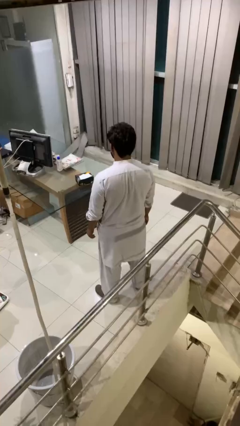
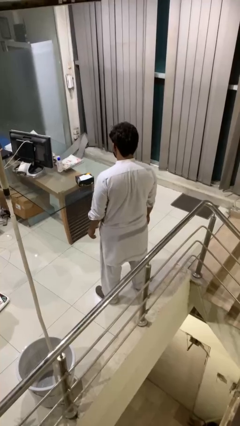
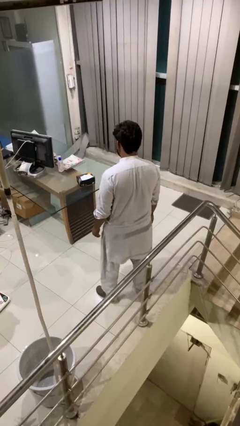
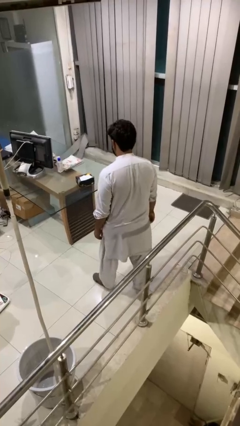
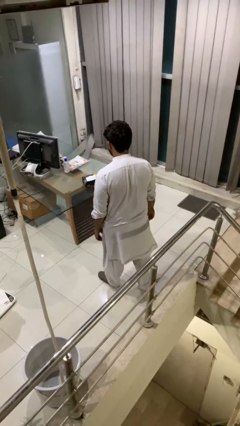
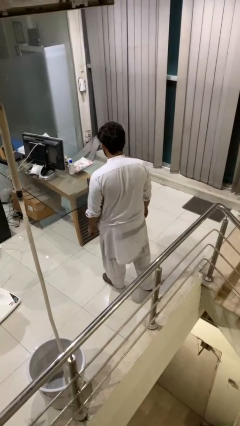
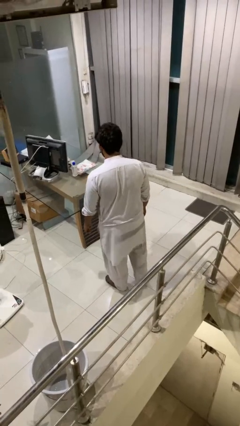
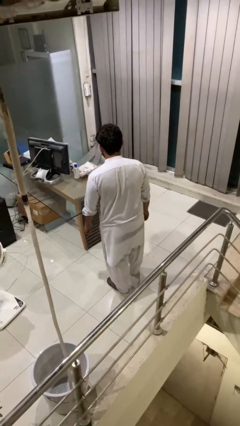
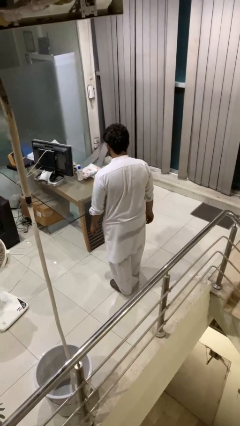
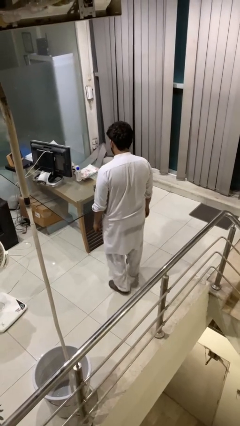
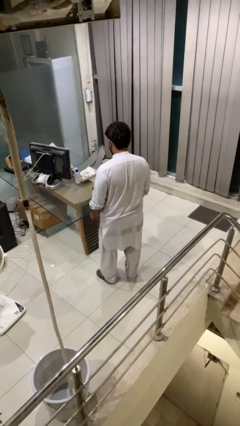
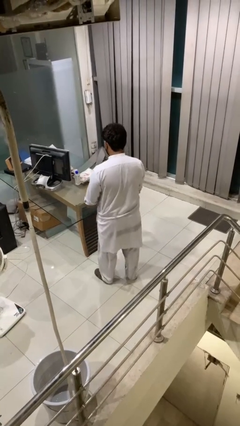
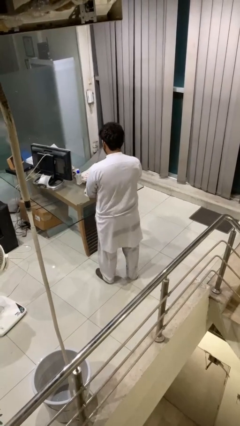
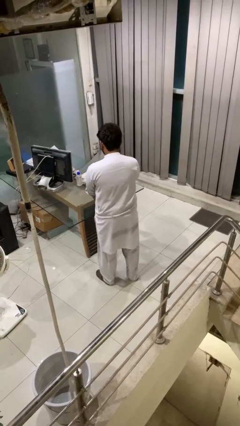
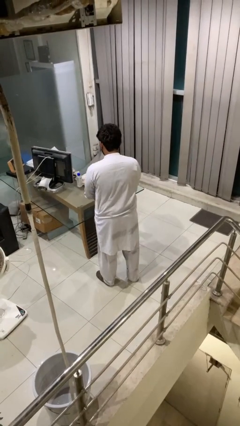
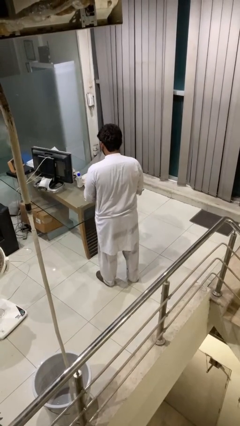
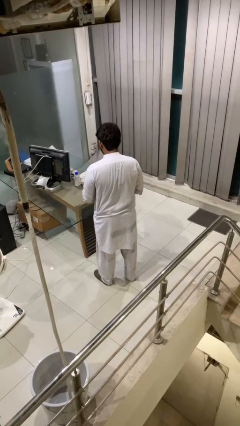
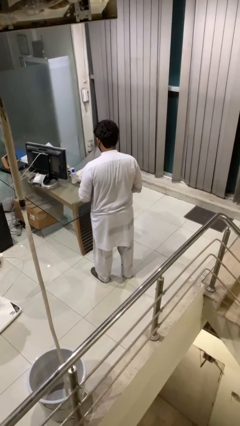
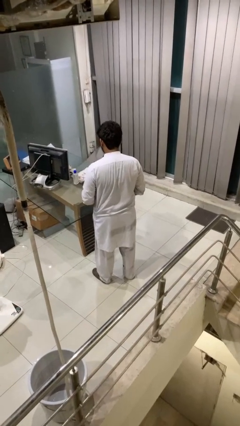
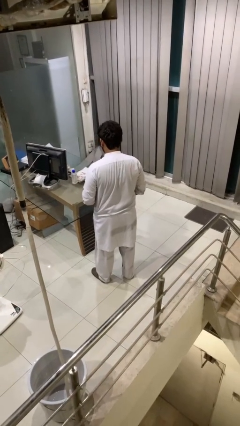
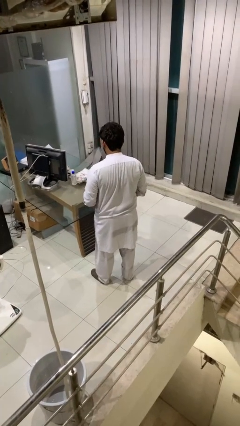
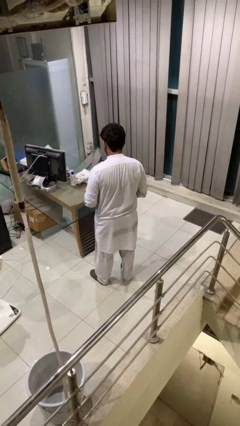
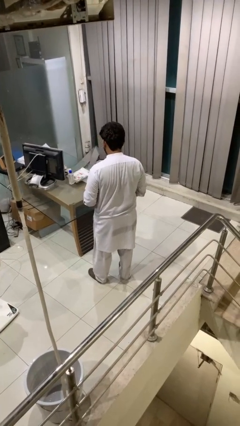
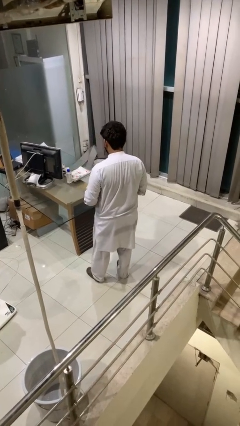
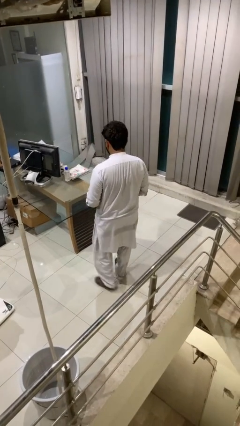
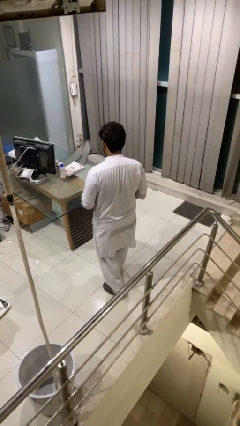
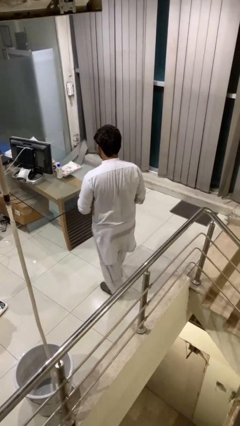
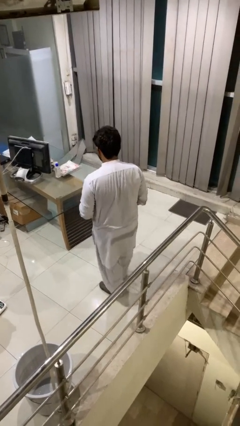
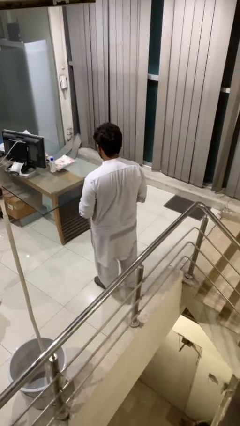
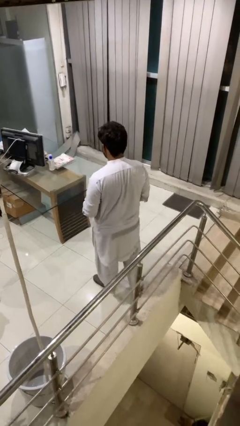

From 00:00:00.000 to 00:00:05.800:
person picks up object from table

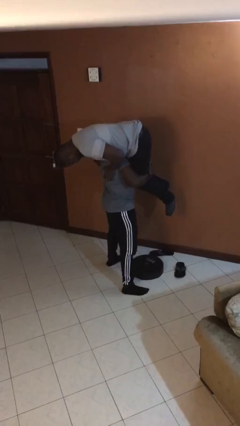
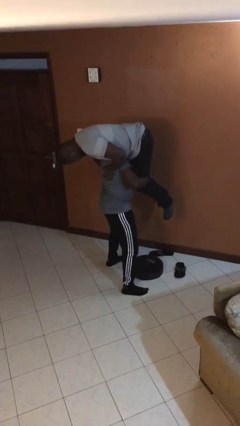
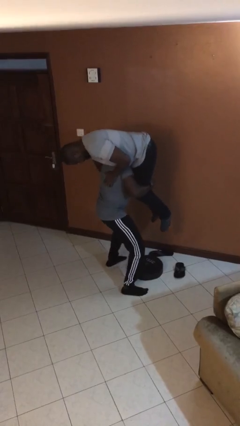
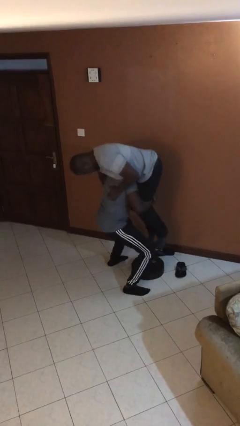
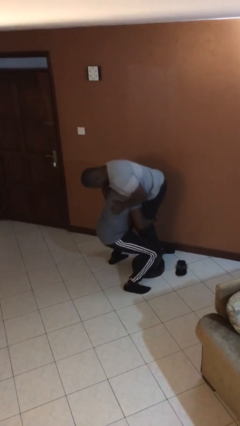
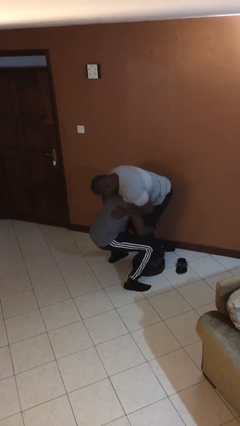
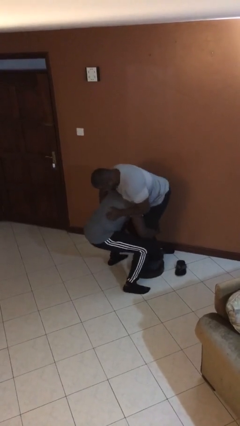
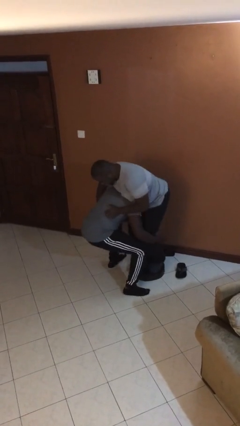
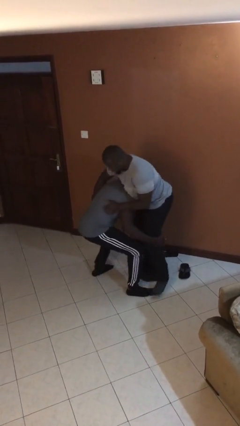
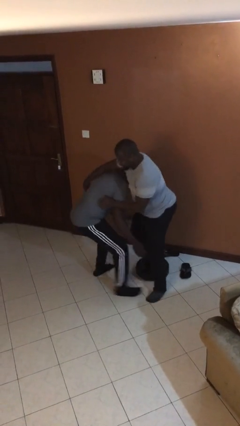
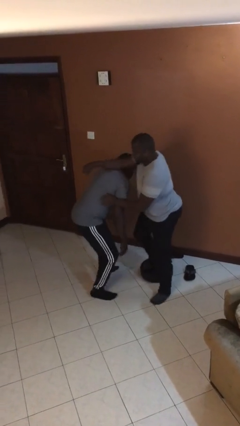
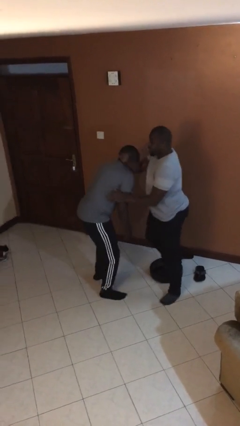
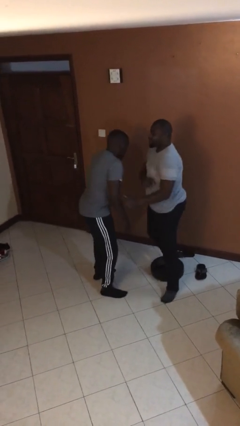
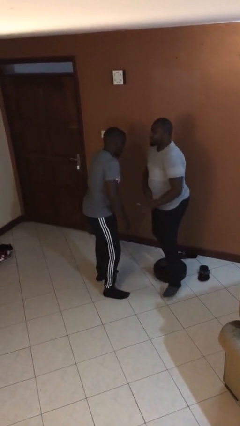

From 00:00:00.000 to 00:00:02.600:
person puts down person

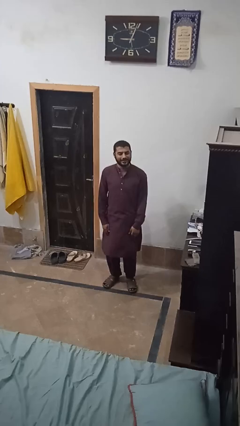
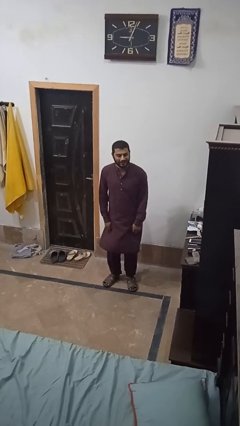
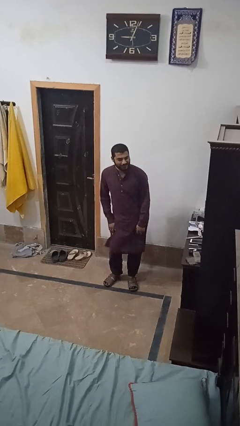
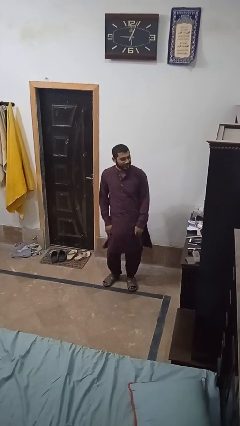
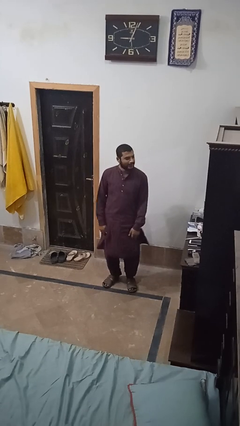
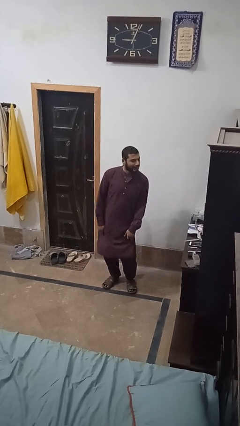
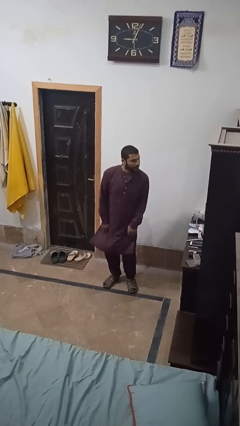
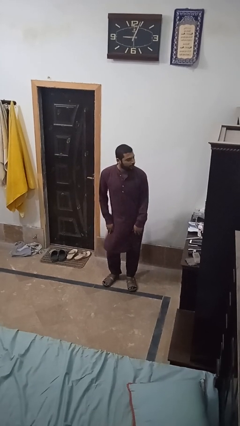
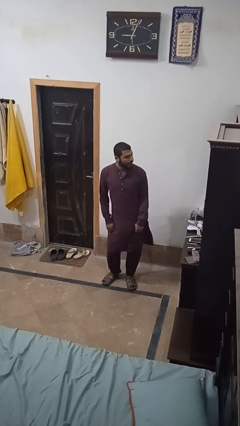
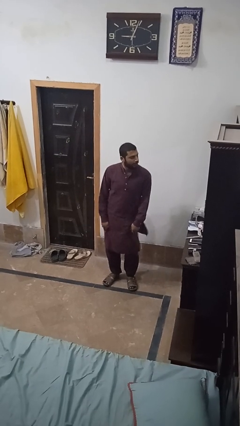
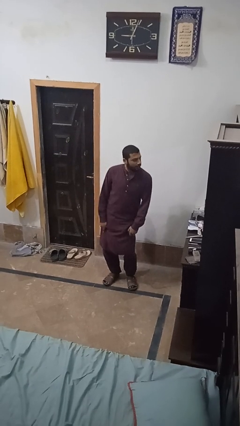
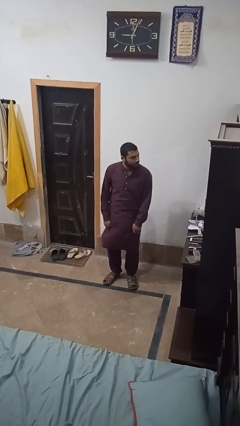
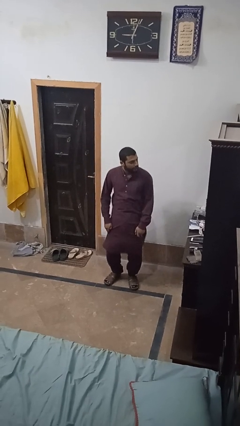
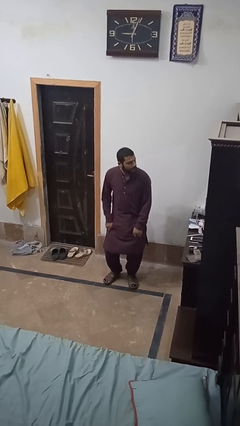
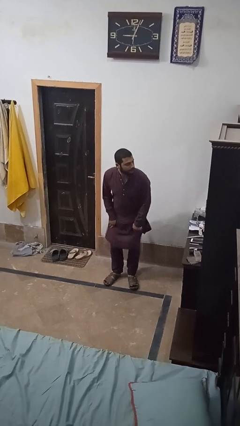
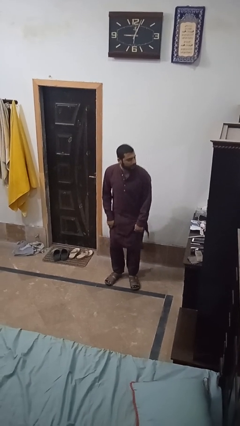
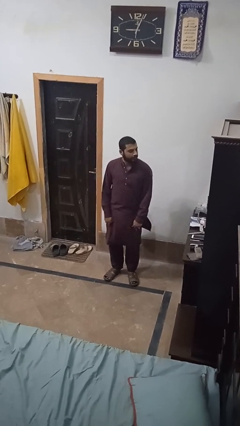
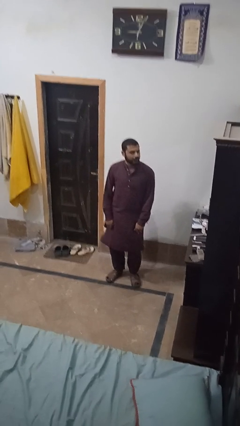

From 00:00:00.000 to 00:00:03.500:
person wiggles hips

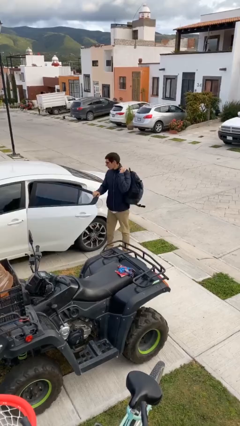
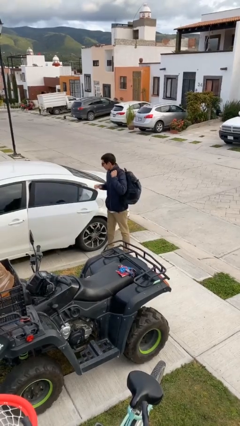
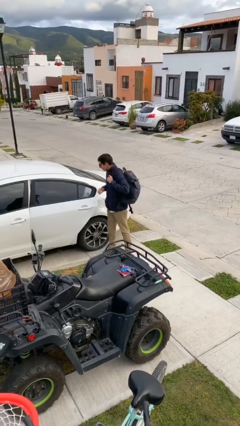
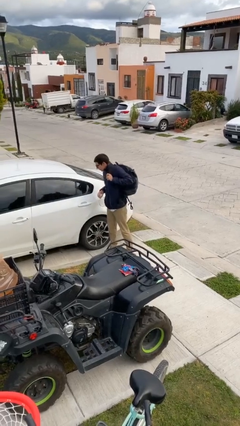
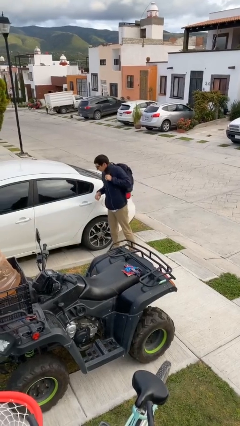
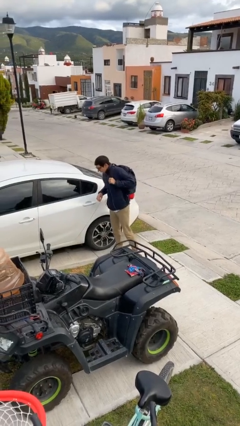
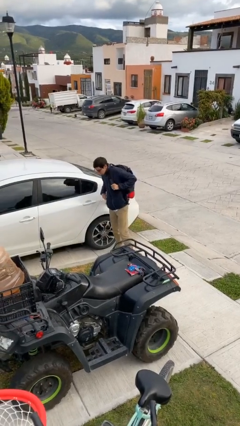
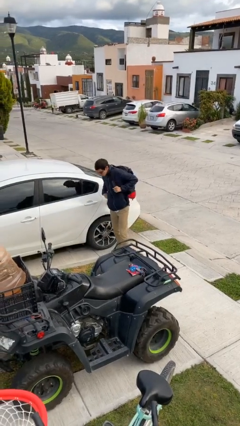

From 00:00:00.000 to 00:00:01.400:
person closes car door

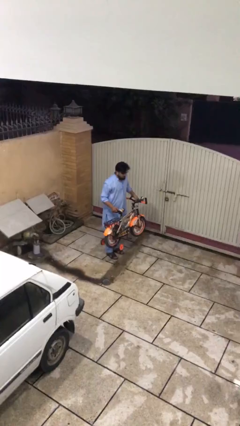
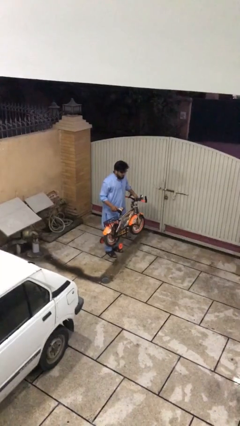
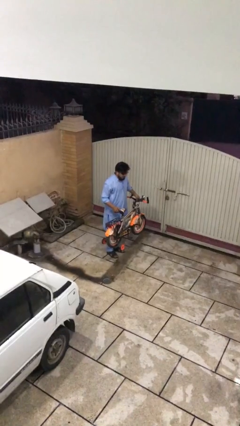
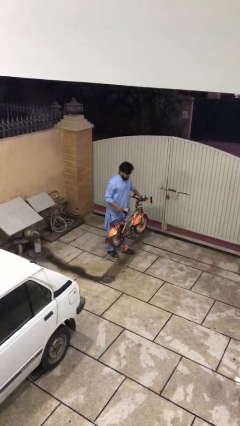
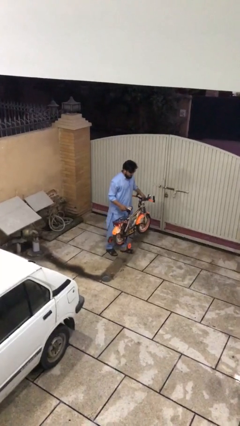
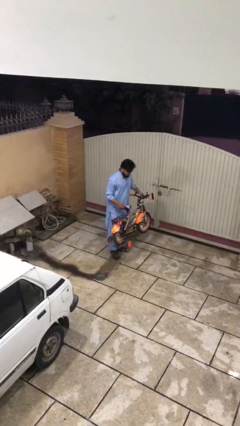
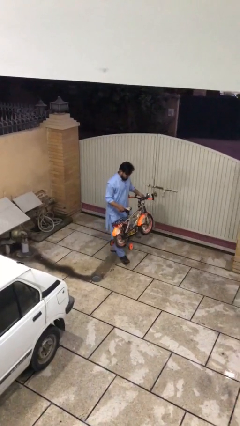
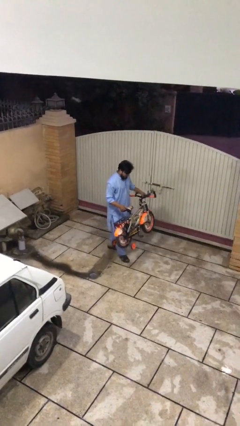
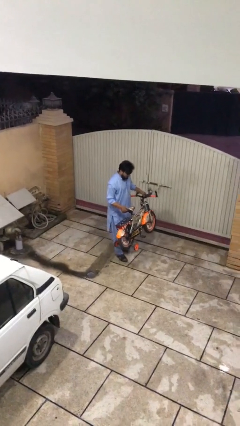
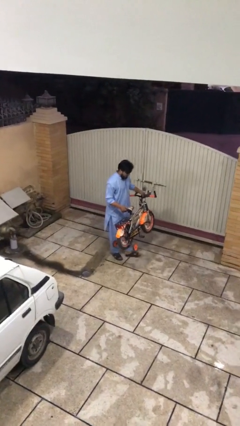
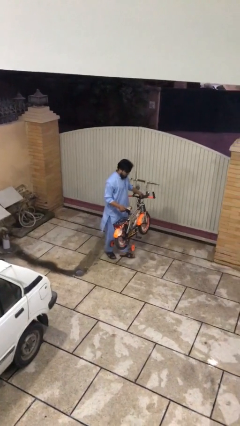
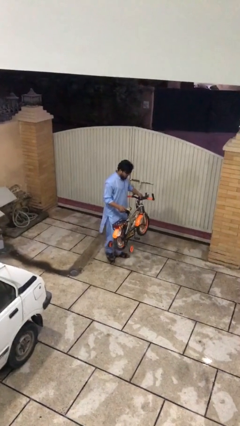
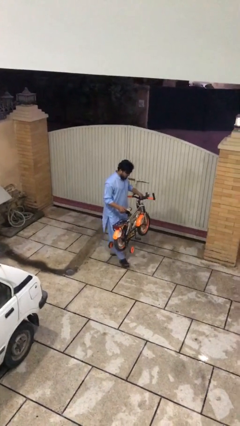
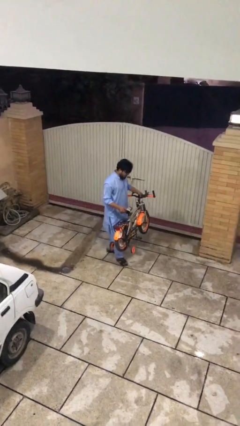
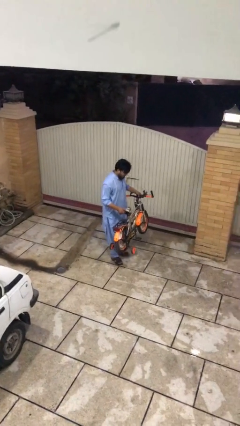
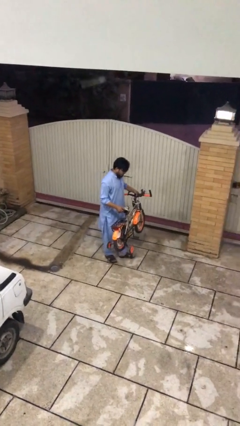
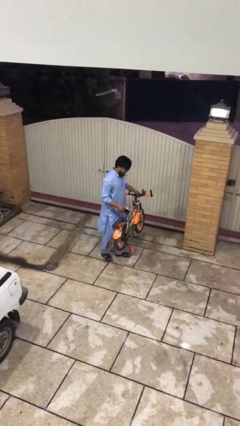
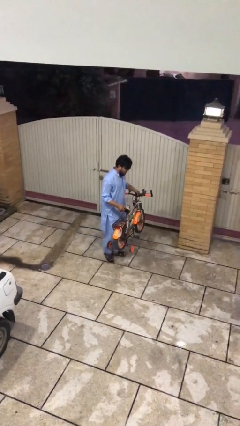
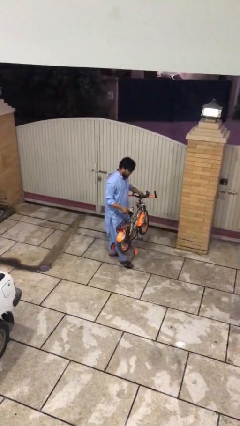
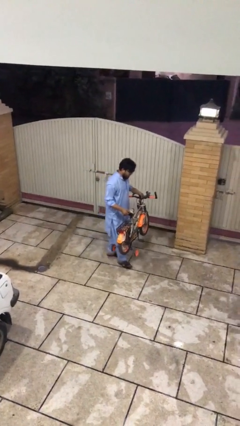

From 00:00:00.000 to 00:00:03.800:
person carries heavy object

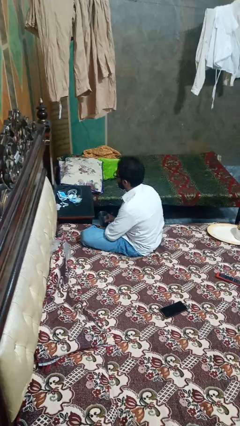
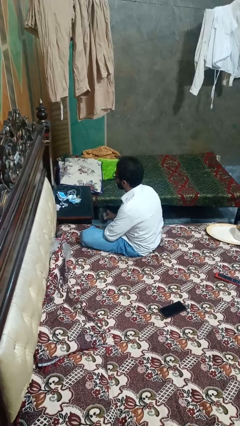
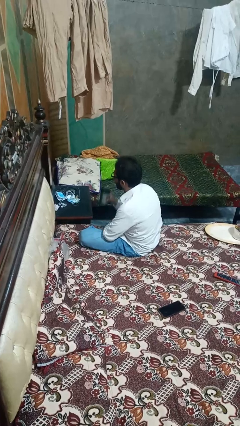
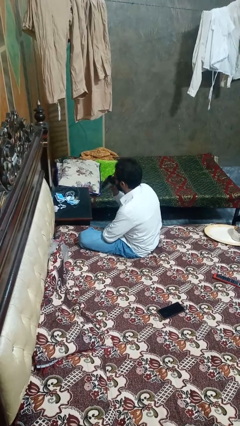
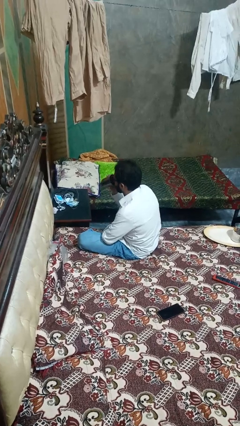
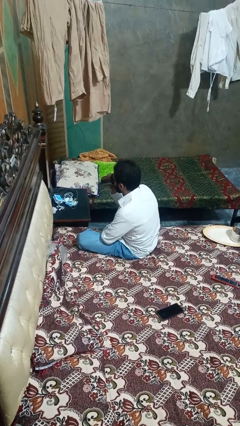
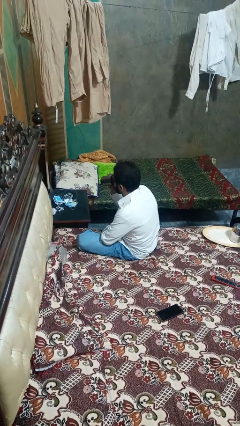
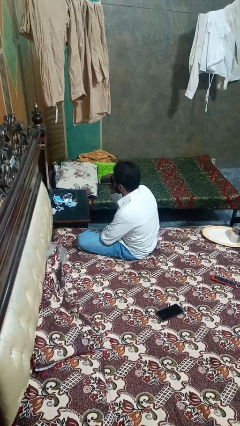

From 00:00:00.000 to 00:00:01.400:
person drinks from mug
